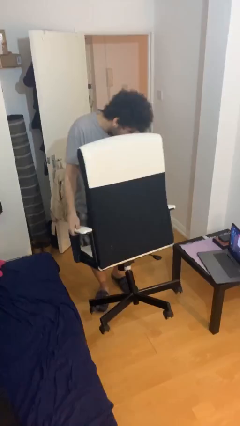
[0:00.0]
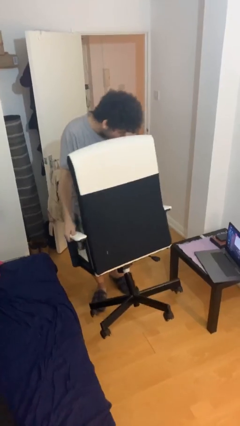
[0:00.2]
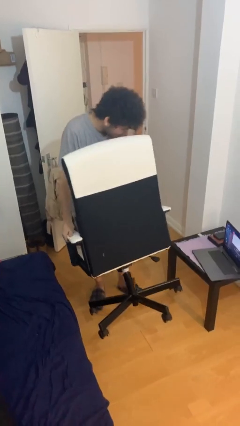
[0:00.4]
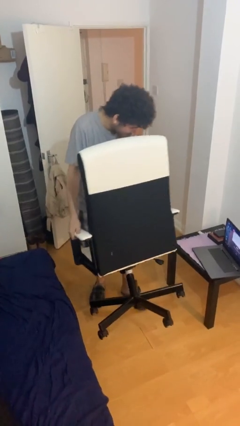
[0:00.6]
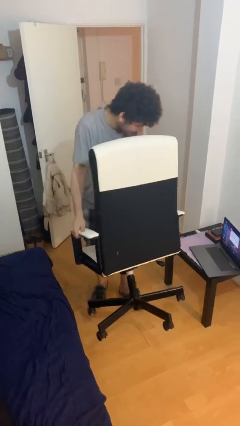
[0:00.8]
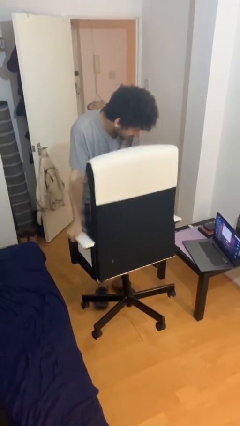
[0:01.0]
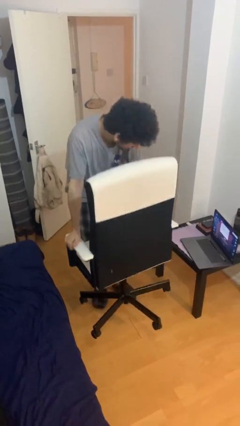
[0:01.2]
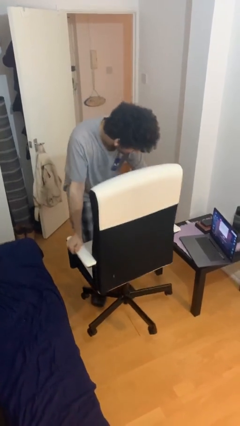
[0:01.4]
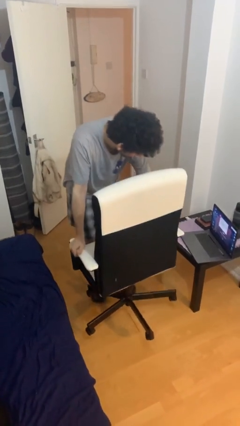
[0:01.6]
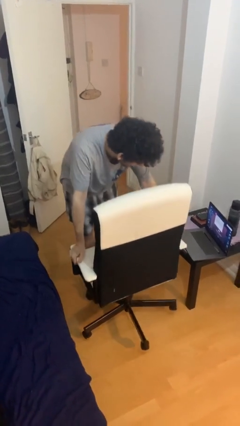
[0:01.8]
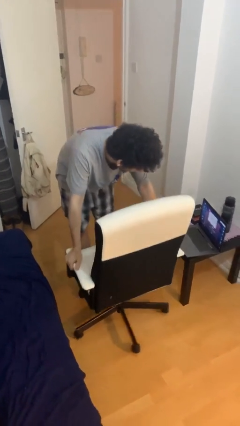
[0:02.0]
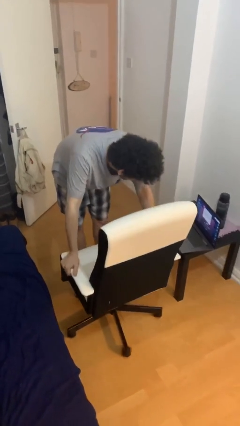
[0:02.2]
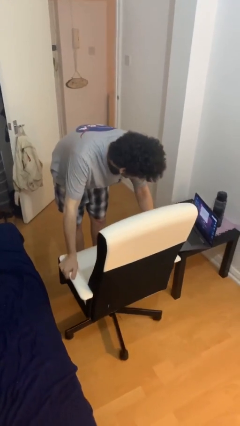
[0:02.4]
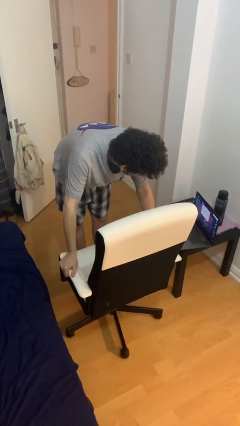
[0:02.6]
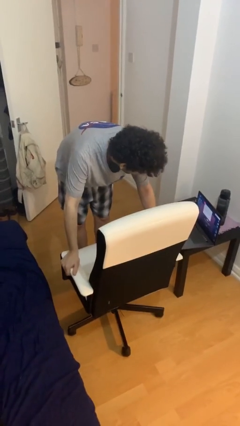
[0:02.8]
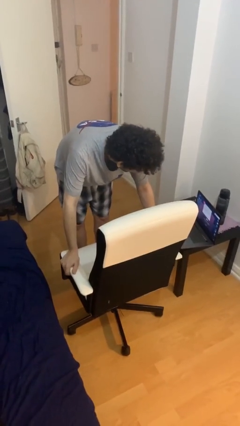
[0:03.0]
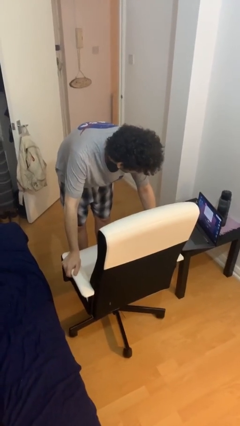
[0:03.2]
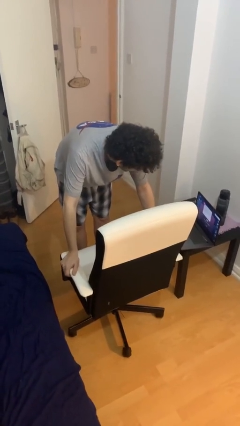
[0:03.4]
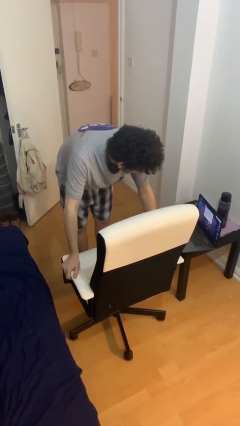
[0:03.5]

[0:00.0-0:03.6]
person puts down object on floor

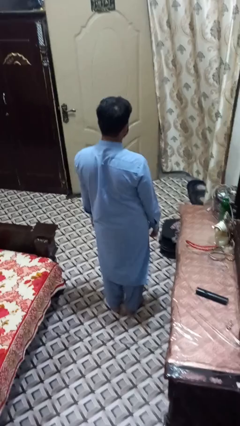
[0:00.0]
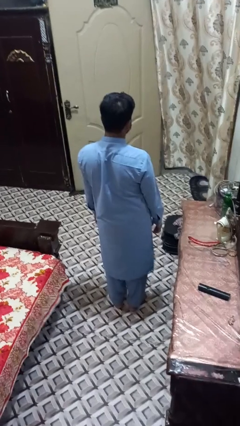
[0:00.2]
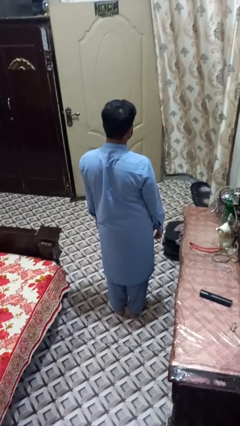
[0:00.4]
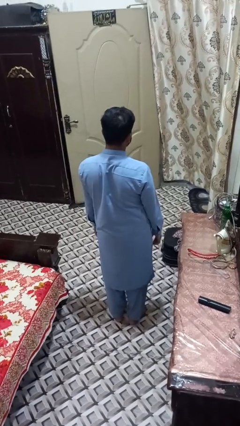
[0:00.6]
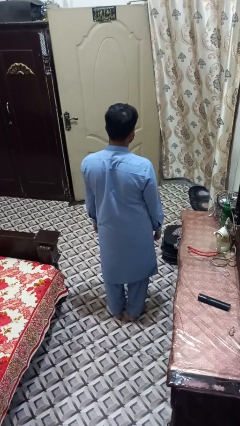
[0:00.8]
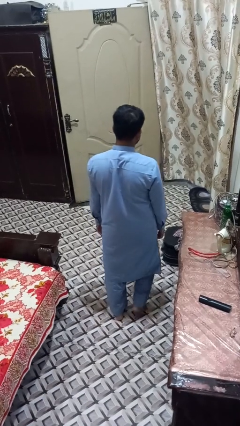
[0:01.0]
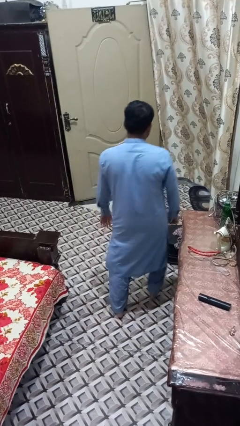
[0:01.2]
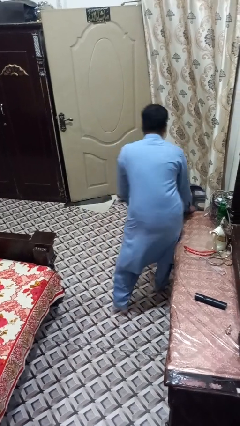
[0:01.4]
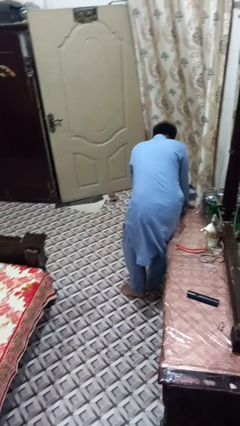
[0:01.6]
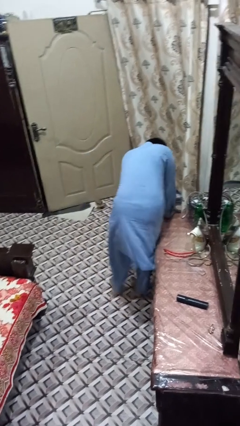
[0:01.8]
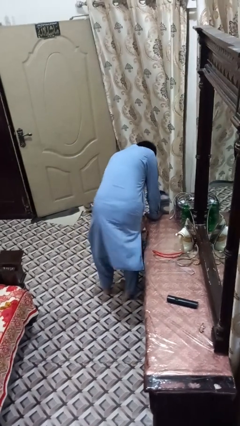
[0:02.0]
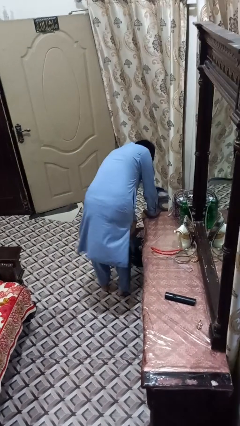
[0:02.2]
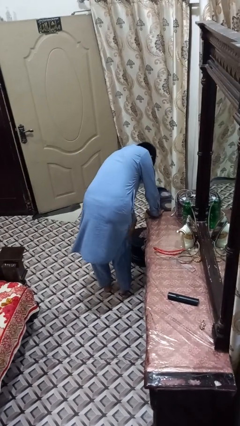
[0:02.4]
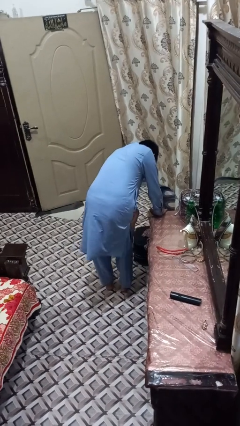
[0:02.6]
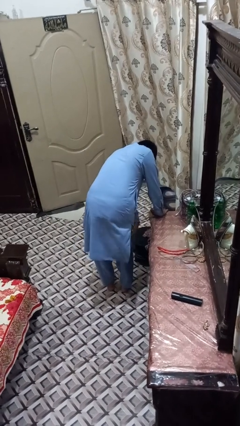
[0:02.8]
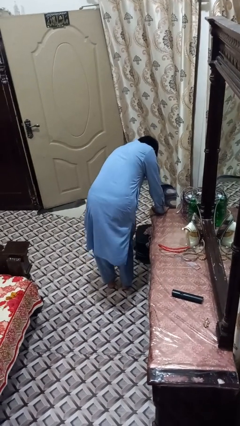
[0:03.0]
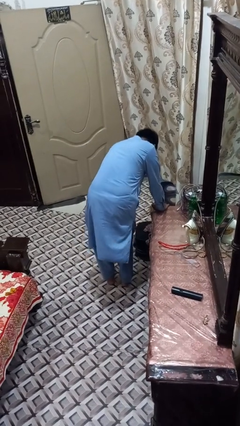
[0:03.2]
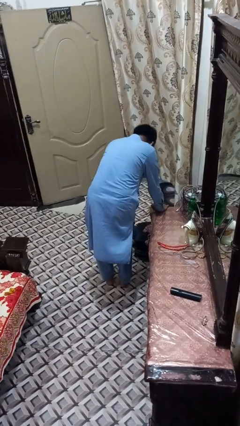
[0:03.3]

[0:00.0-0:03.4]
person bumps into table

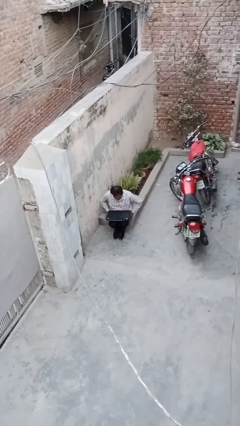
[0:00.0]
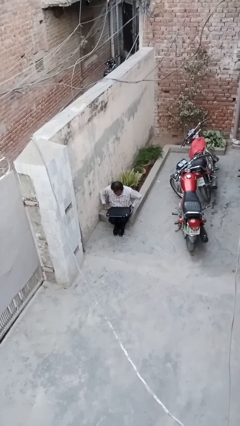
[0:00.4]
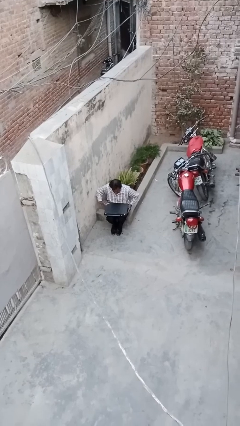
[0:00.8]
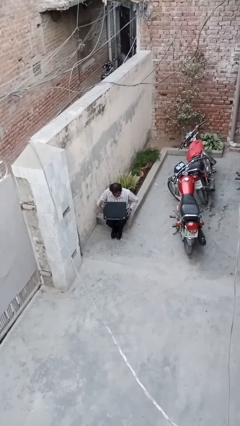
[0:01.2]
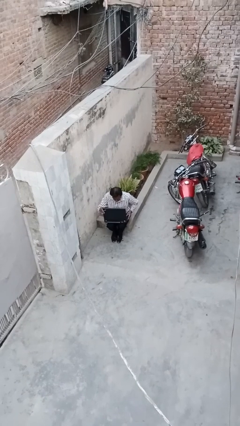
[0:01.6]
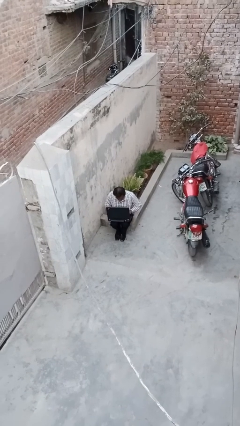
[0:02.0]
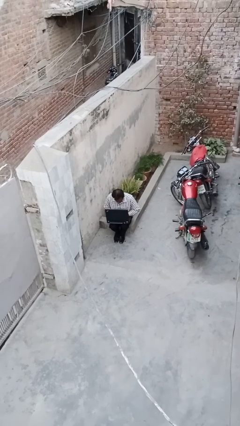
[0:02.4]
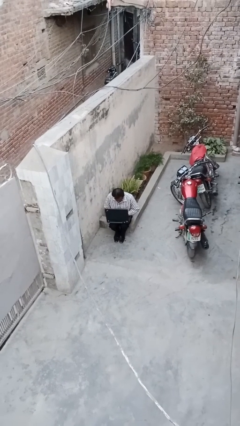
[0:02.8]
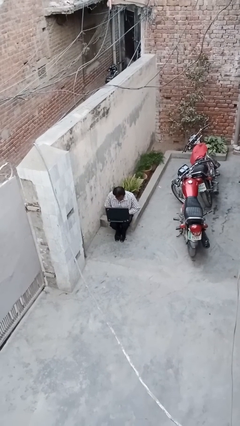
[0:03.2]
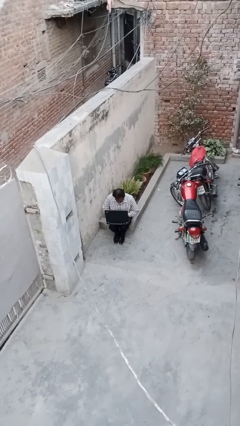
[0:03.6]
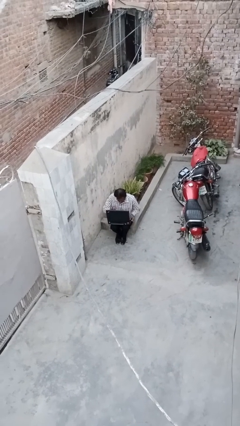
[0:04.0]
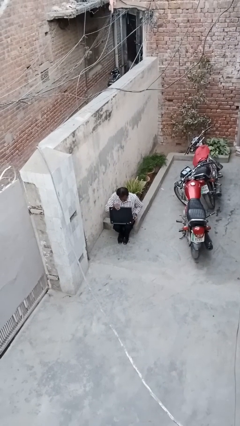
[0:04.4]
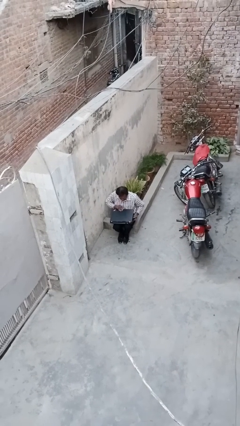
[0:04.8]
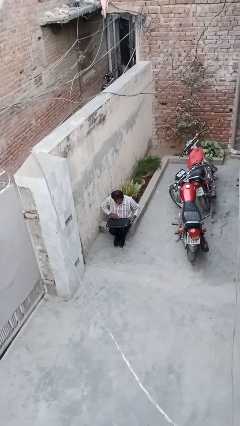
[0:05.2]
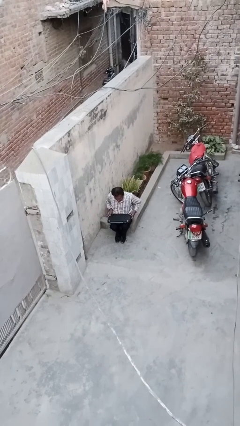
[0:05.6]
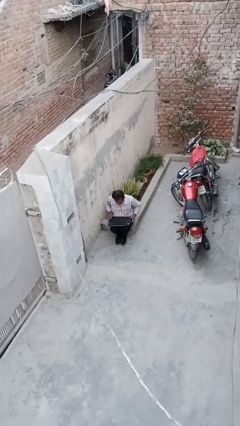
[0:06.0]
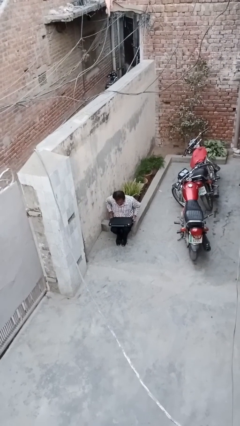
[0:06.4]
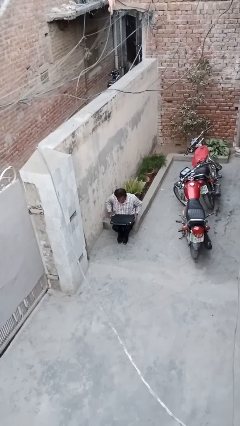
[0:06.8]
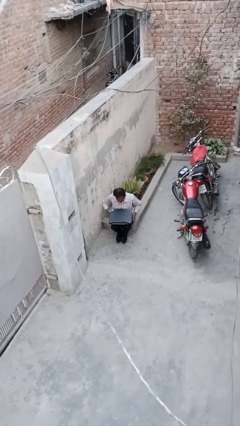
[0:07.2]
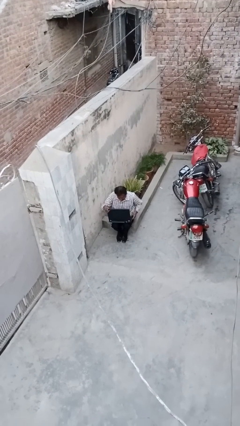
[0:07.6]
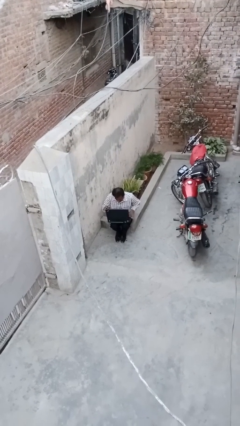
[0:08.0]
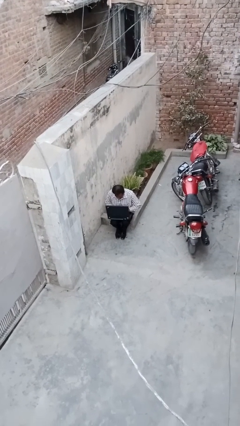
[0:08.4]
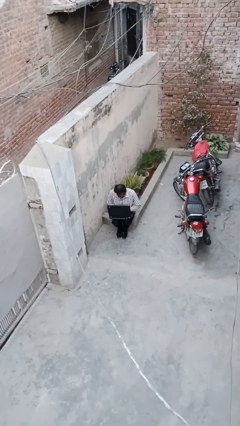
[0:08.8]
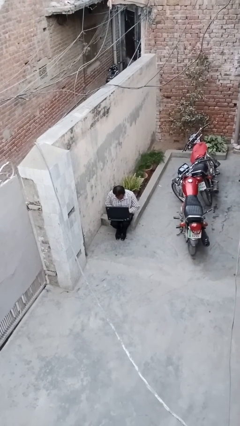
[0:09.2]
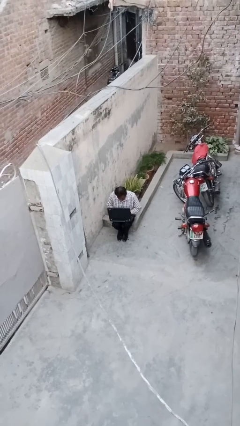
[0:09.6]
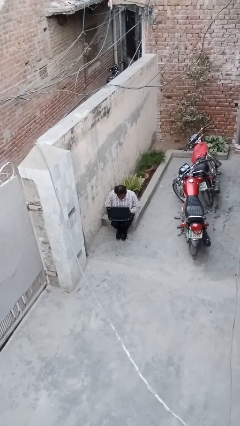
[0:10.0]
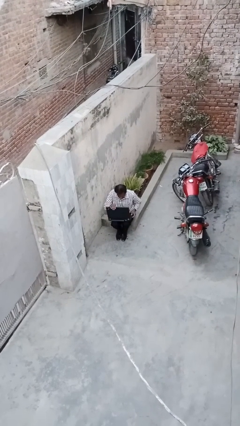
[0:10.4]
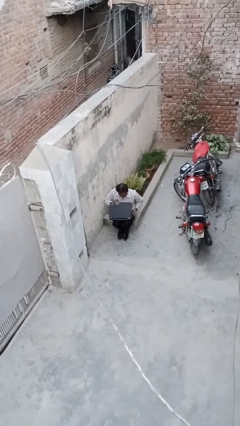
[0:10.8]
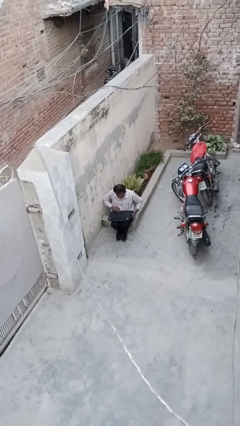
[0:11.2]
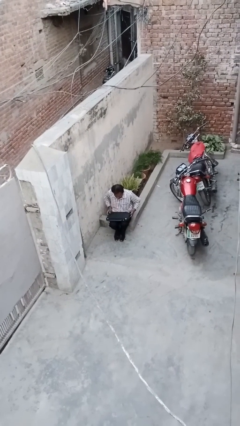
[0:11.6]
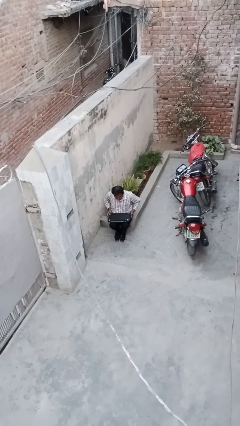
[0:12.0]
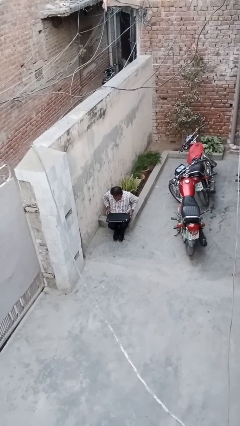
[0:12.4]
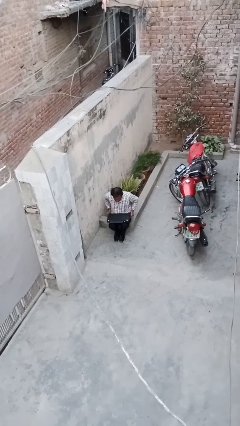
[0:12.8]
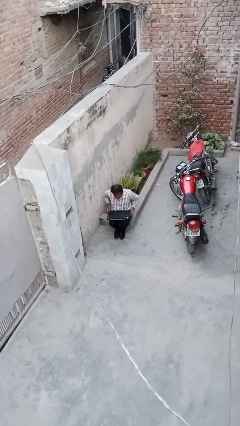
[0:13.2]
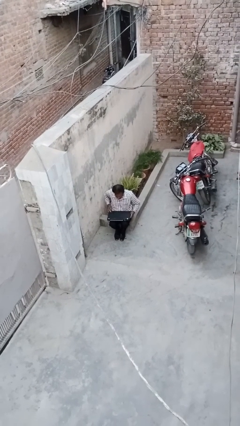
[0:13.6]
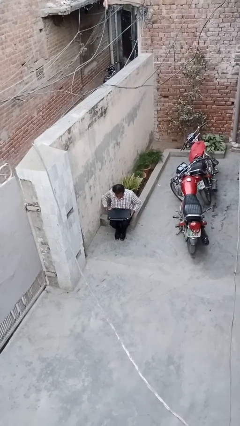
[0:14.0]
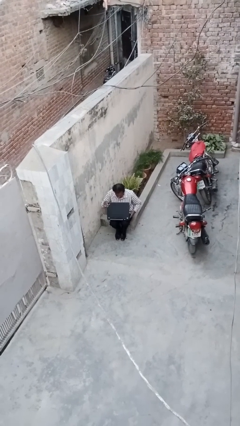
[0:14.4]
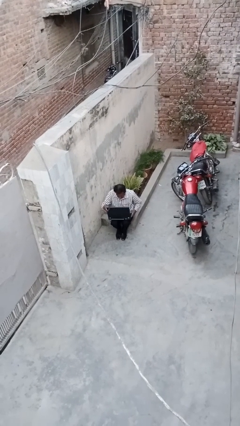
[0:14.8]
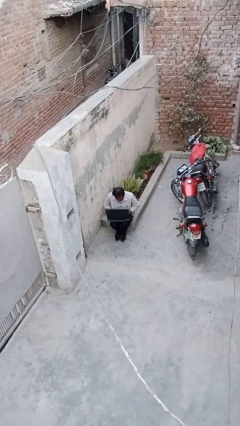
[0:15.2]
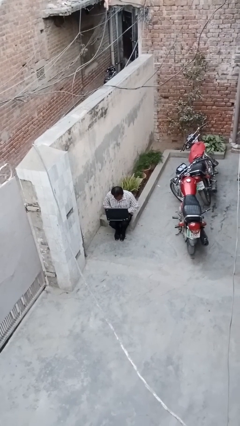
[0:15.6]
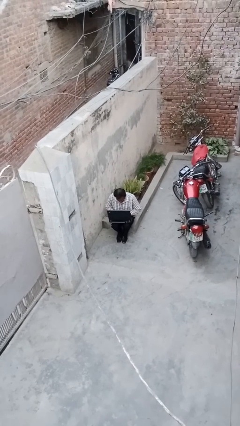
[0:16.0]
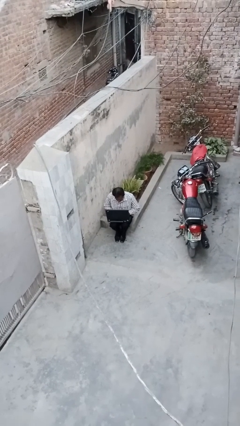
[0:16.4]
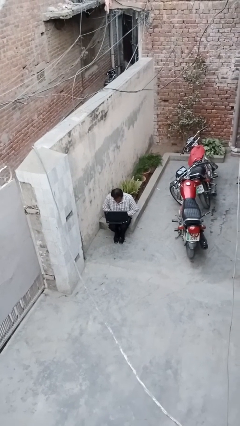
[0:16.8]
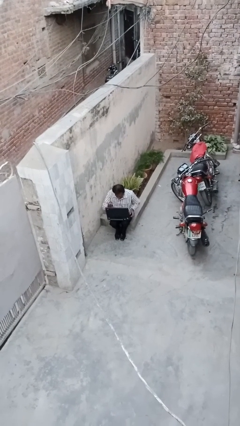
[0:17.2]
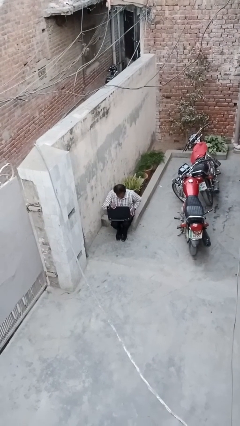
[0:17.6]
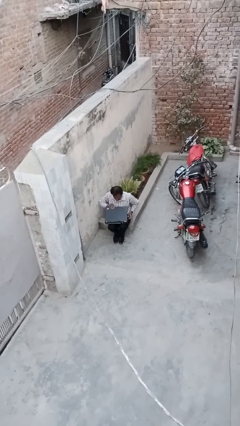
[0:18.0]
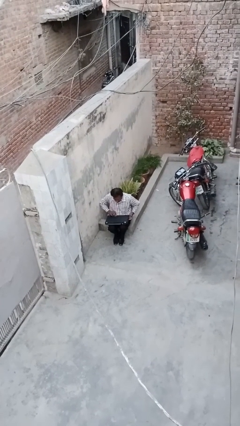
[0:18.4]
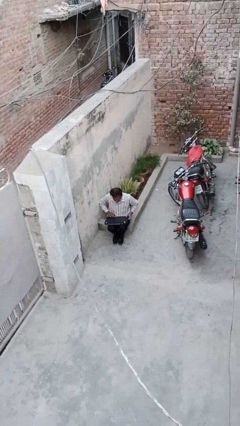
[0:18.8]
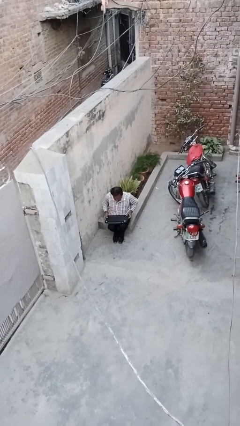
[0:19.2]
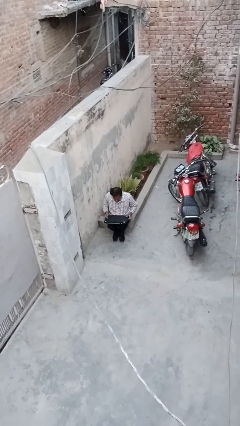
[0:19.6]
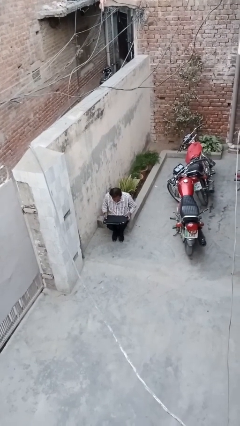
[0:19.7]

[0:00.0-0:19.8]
person interacts with laptop

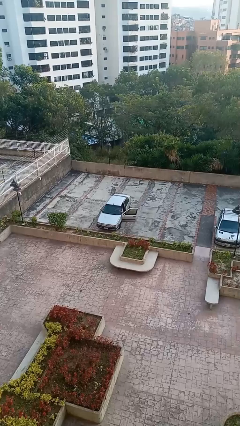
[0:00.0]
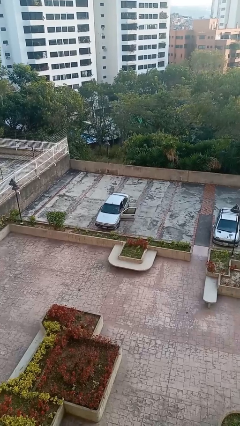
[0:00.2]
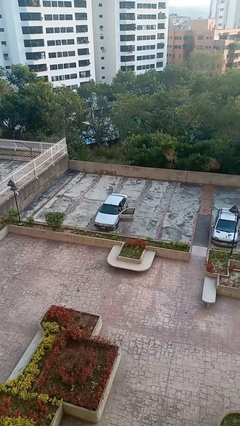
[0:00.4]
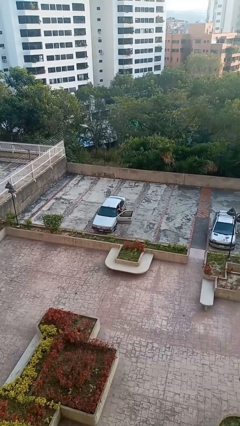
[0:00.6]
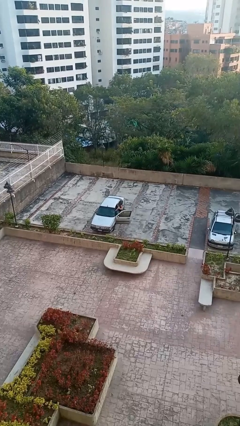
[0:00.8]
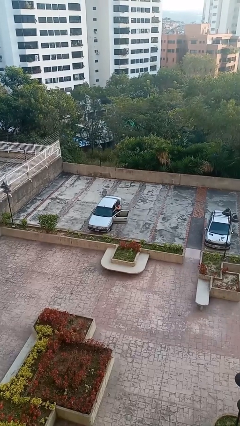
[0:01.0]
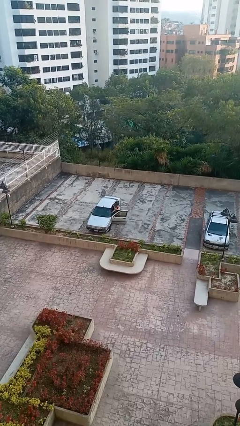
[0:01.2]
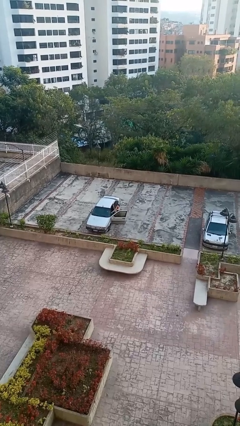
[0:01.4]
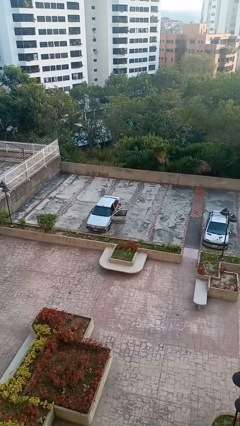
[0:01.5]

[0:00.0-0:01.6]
person exits car
